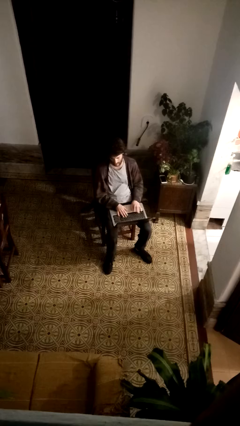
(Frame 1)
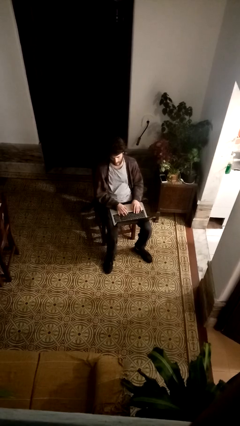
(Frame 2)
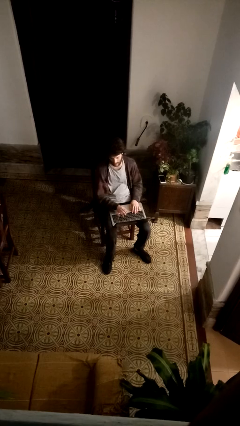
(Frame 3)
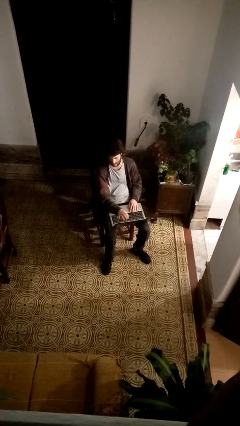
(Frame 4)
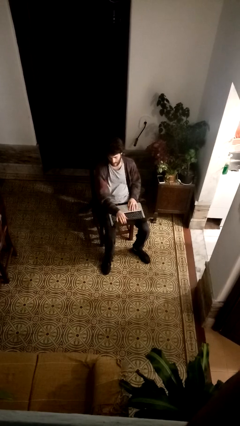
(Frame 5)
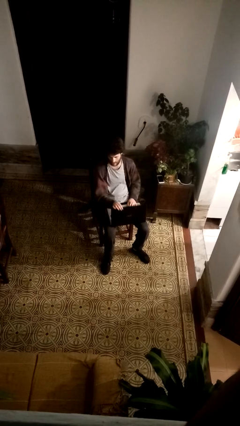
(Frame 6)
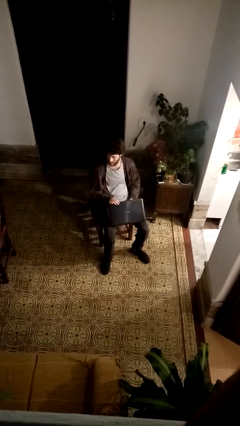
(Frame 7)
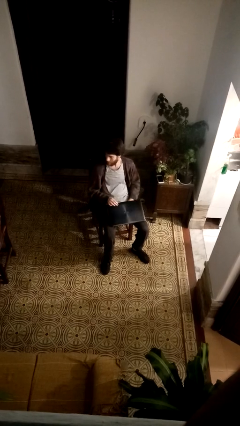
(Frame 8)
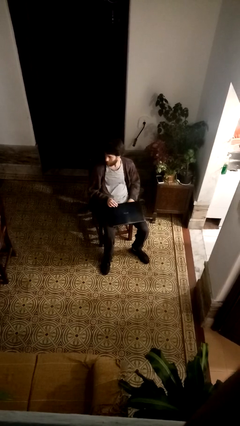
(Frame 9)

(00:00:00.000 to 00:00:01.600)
person closes laptop

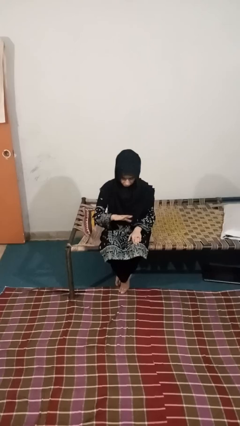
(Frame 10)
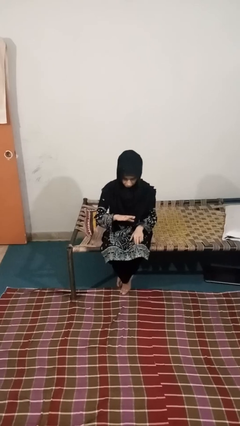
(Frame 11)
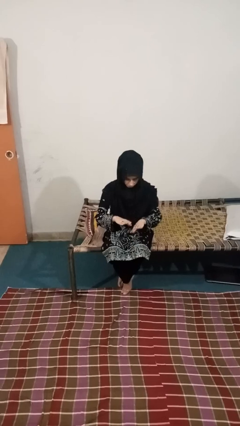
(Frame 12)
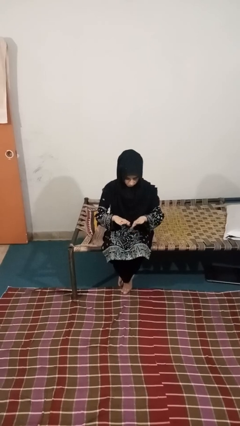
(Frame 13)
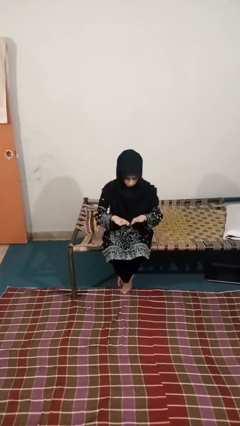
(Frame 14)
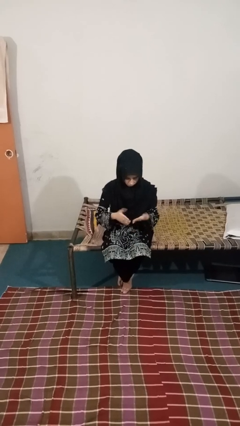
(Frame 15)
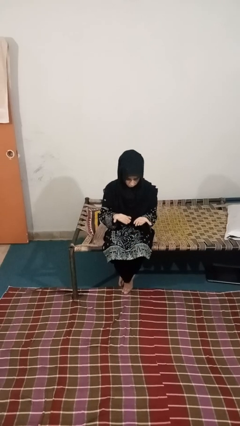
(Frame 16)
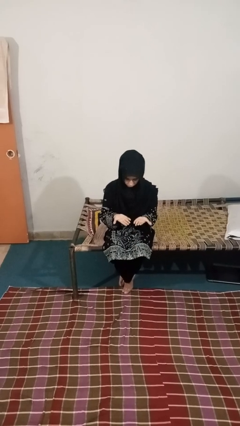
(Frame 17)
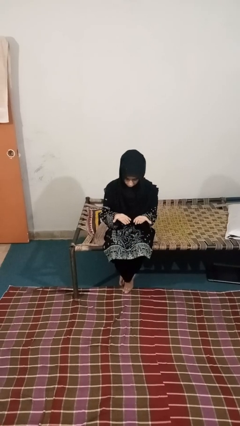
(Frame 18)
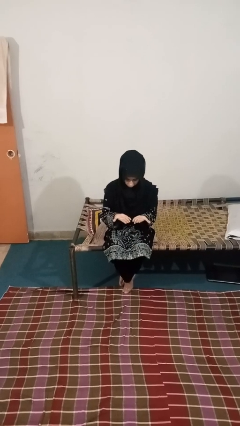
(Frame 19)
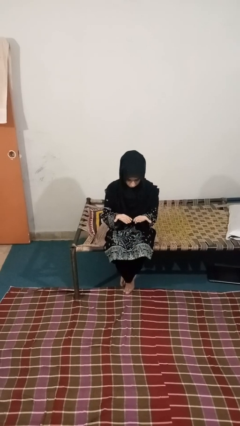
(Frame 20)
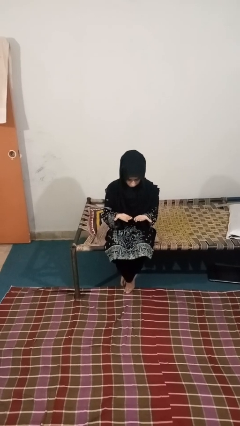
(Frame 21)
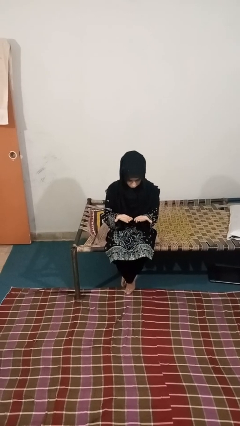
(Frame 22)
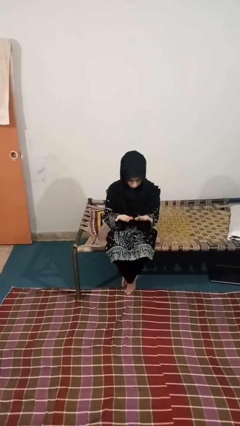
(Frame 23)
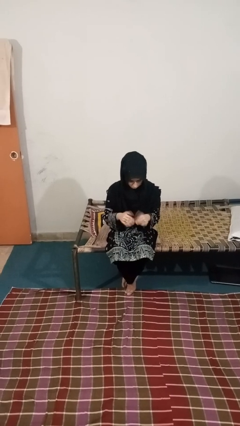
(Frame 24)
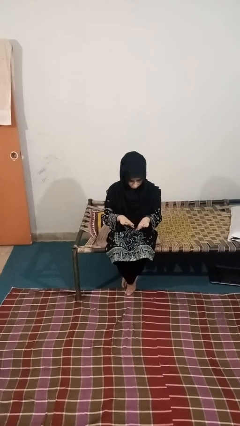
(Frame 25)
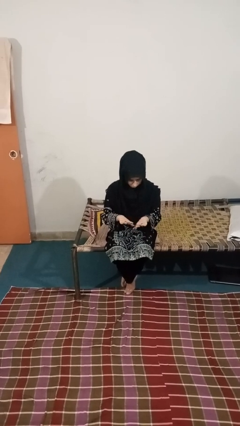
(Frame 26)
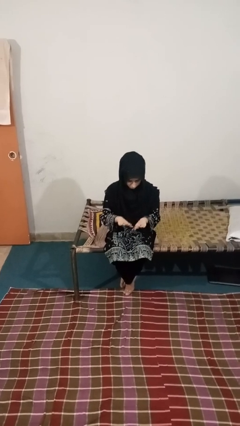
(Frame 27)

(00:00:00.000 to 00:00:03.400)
person looks at hands in lap

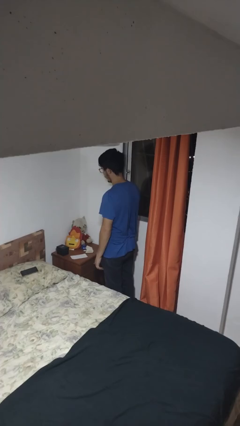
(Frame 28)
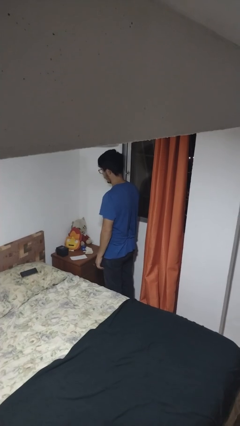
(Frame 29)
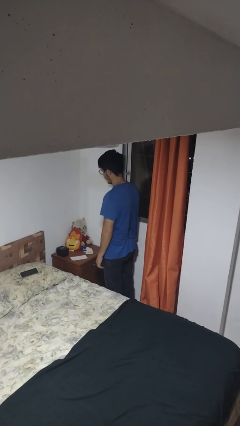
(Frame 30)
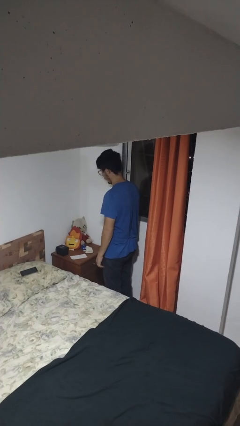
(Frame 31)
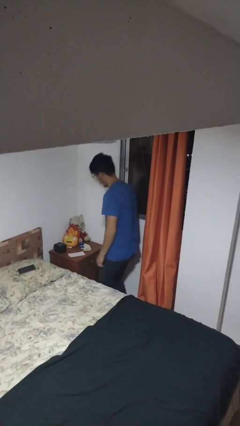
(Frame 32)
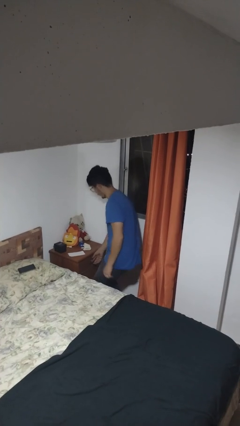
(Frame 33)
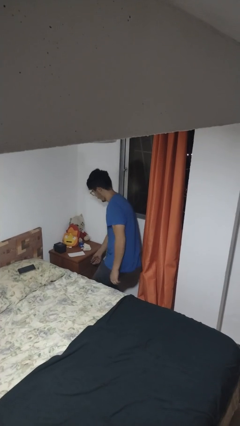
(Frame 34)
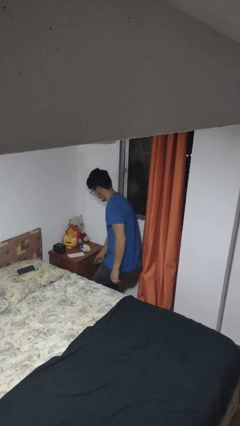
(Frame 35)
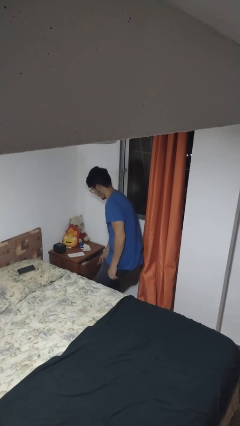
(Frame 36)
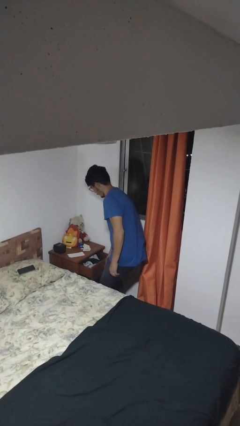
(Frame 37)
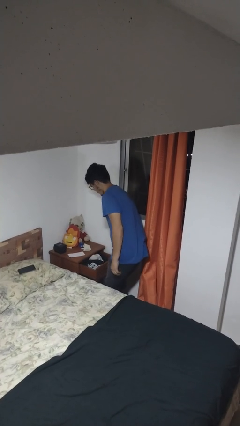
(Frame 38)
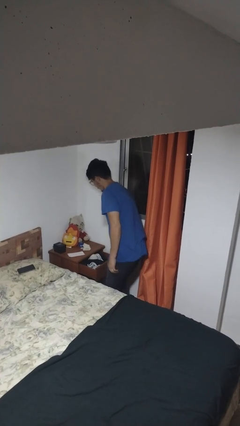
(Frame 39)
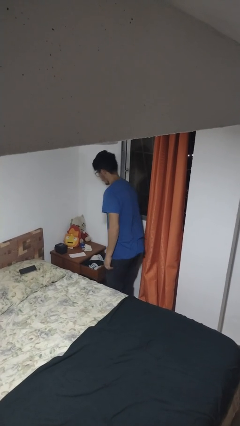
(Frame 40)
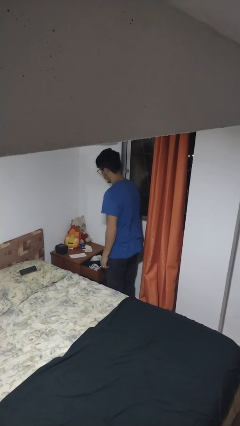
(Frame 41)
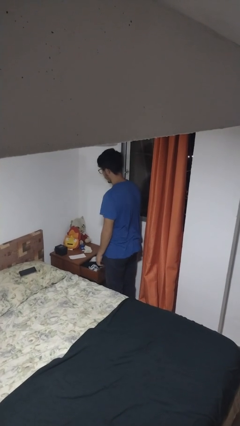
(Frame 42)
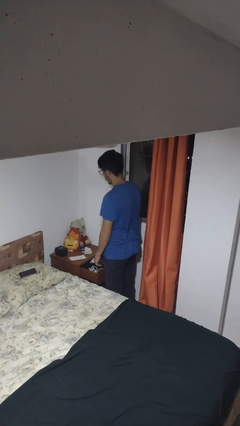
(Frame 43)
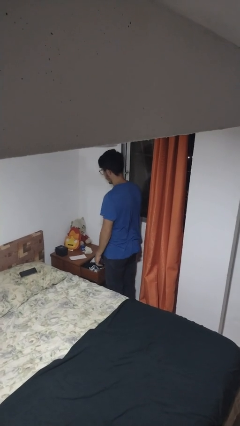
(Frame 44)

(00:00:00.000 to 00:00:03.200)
person opens dresser drawer

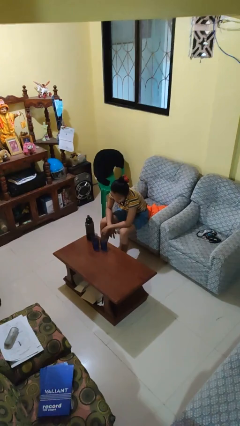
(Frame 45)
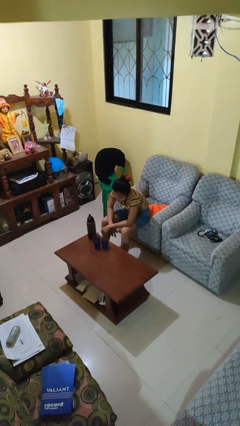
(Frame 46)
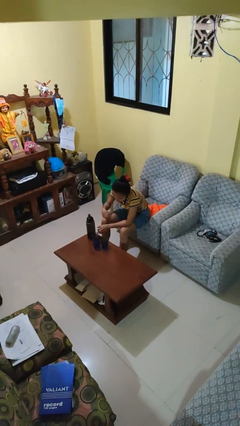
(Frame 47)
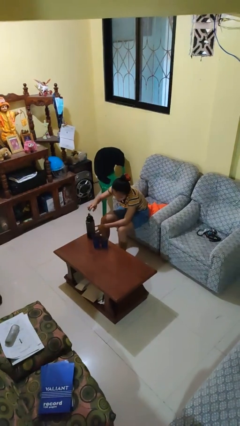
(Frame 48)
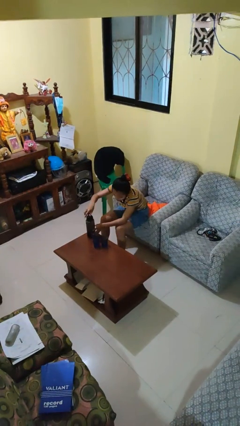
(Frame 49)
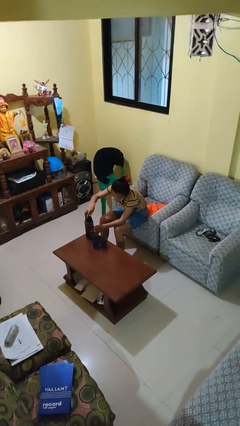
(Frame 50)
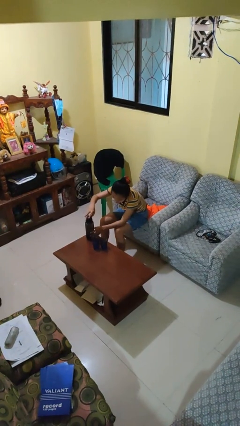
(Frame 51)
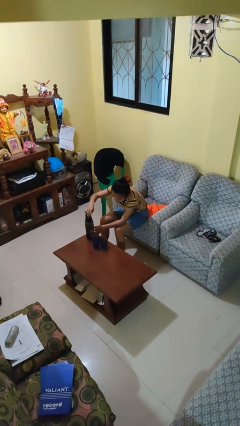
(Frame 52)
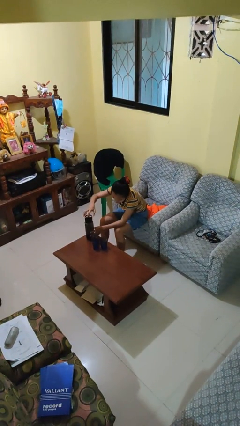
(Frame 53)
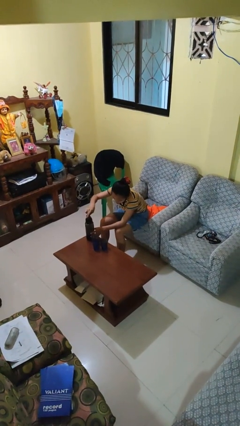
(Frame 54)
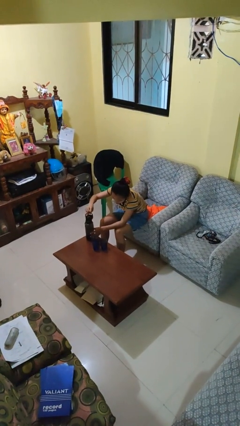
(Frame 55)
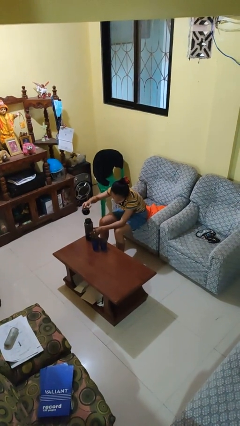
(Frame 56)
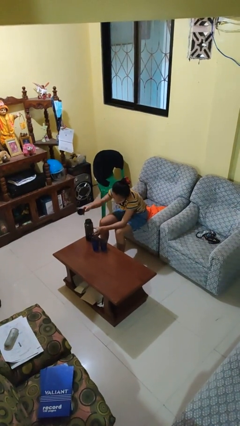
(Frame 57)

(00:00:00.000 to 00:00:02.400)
person unscrews lid from bottle

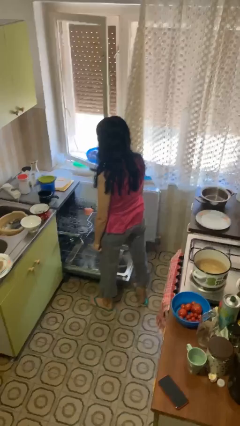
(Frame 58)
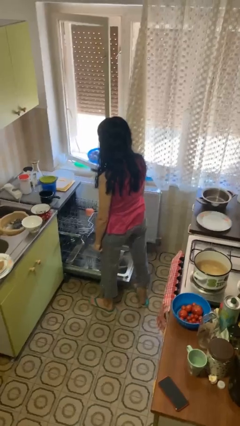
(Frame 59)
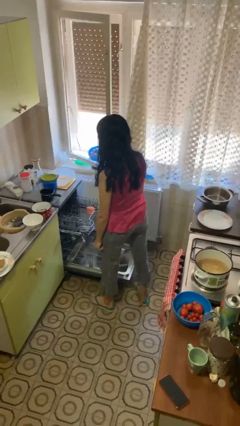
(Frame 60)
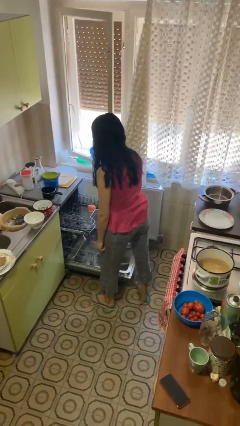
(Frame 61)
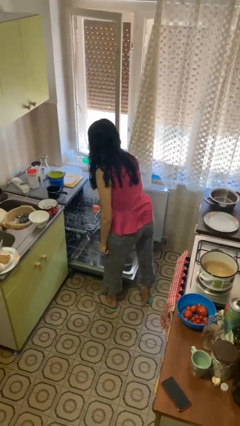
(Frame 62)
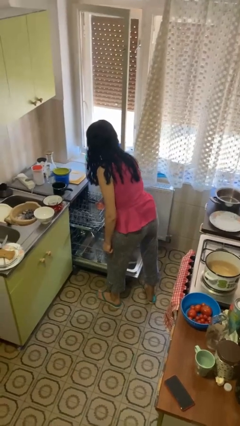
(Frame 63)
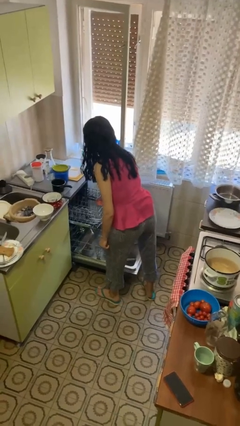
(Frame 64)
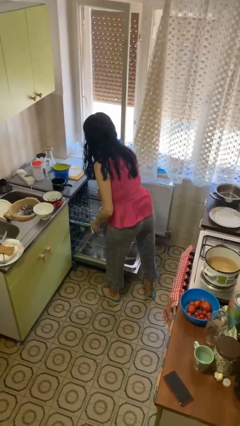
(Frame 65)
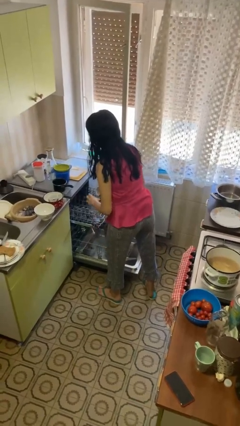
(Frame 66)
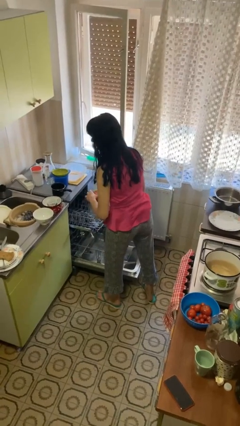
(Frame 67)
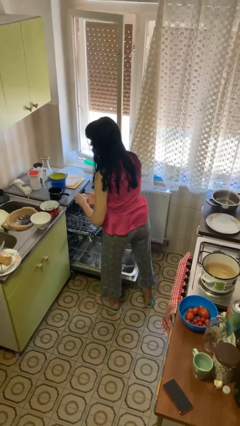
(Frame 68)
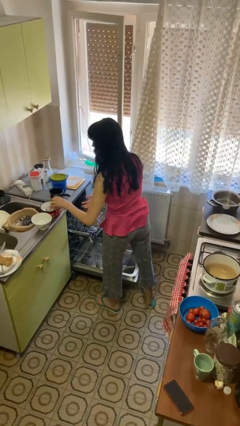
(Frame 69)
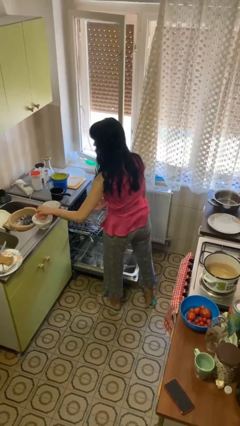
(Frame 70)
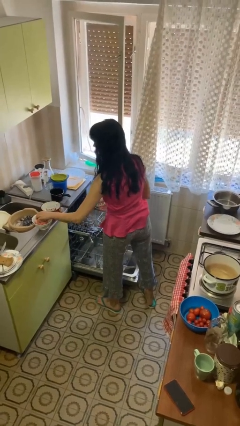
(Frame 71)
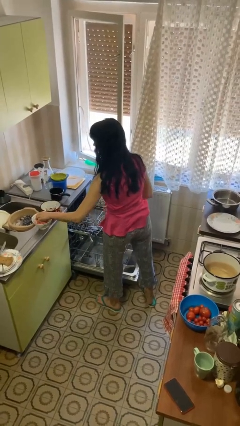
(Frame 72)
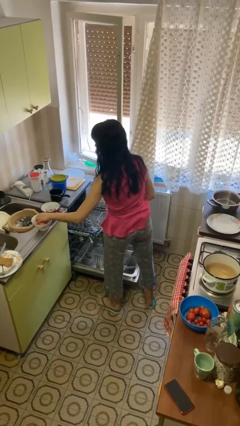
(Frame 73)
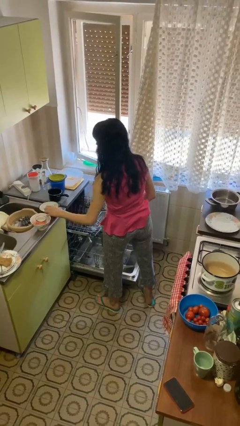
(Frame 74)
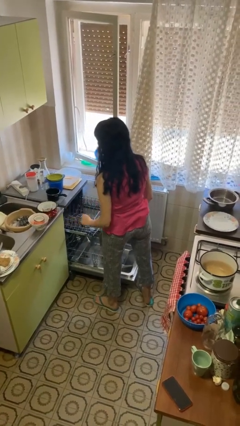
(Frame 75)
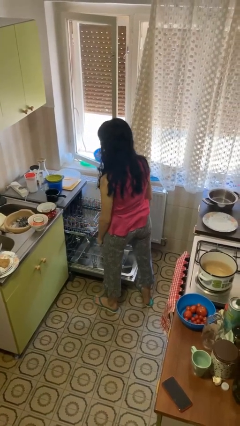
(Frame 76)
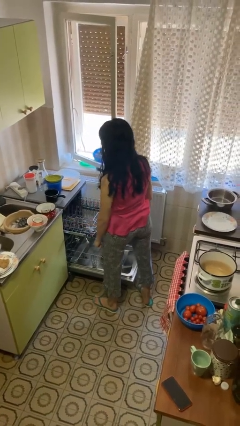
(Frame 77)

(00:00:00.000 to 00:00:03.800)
person unloads dishwasher

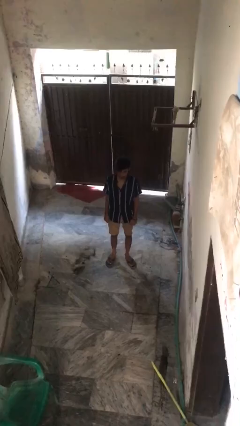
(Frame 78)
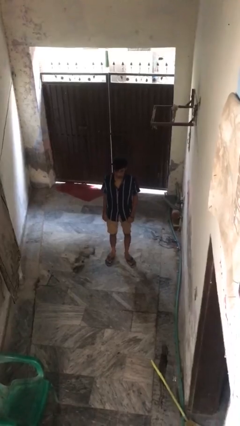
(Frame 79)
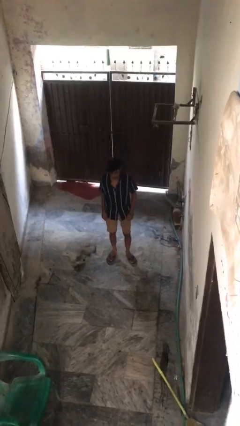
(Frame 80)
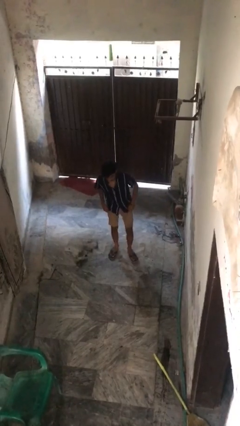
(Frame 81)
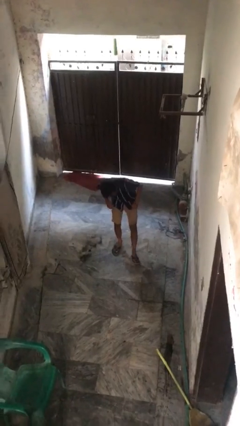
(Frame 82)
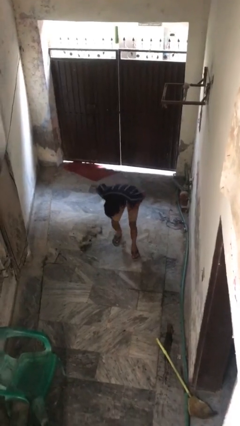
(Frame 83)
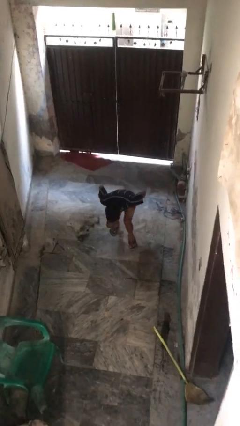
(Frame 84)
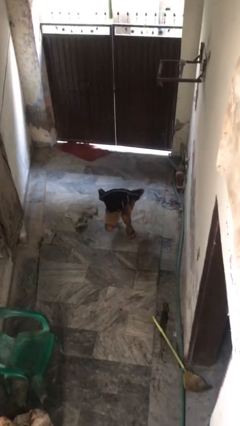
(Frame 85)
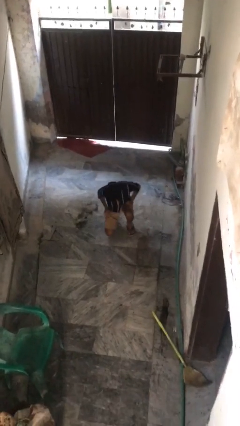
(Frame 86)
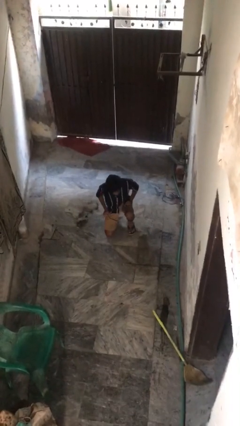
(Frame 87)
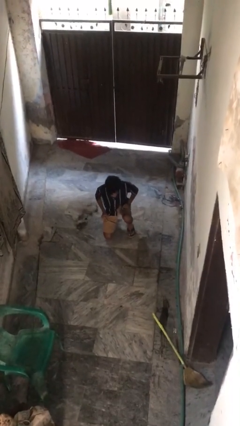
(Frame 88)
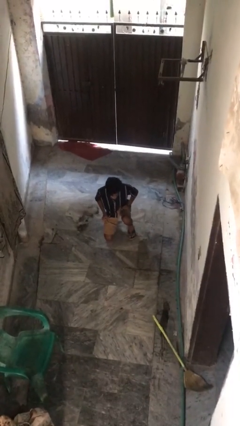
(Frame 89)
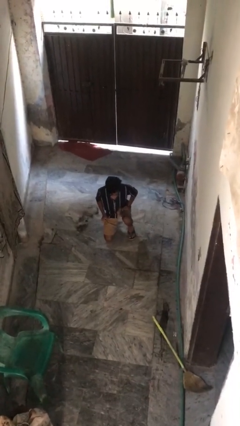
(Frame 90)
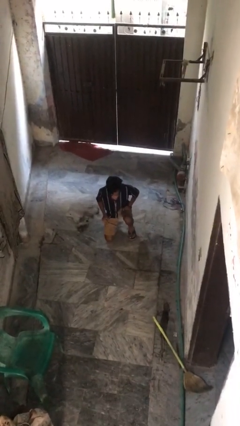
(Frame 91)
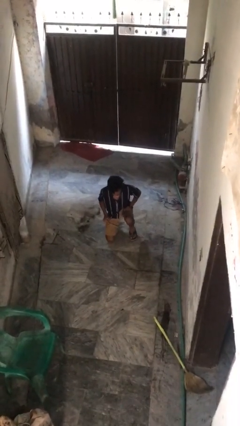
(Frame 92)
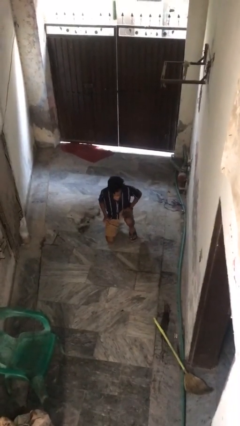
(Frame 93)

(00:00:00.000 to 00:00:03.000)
person kneels
